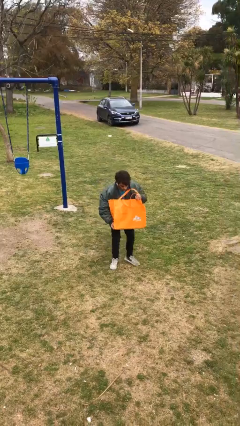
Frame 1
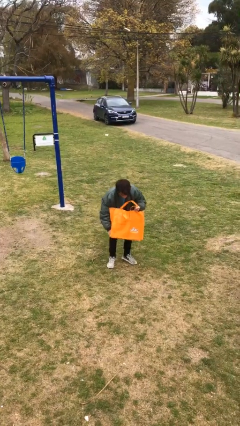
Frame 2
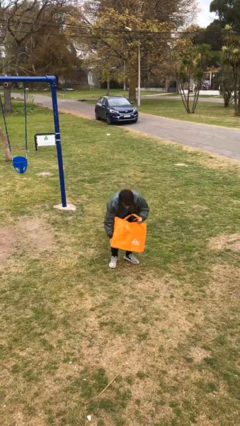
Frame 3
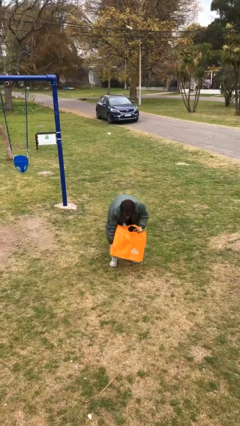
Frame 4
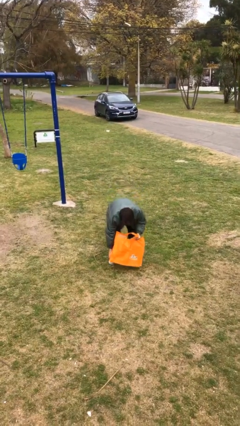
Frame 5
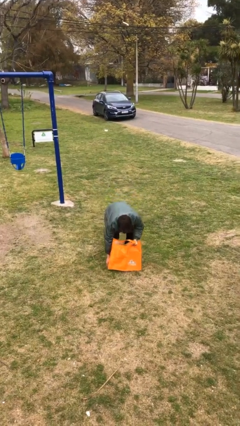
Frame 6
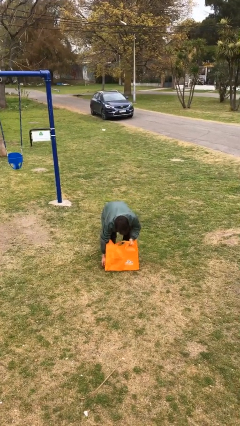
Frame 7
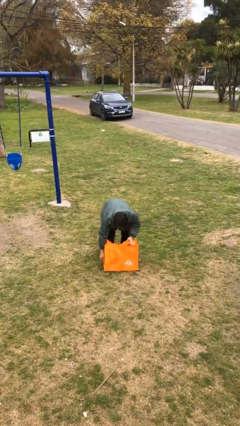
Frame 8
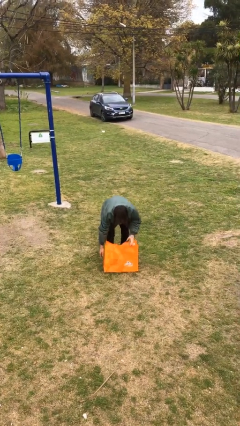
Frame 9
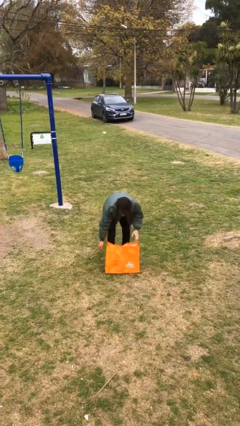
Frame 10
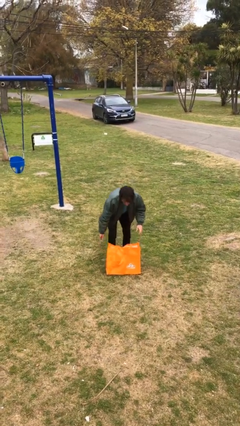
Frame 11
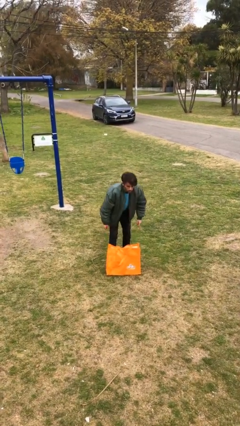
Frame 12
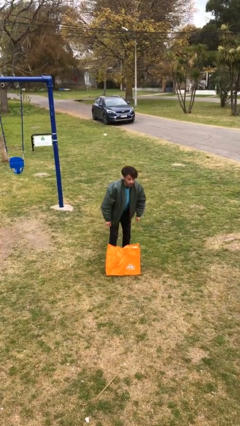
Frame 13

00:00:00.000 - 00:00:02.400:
person puts down object on floor

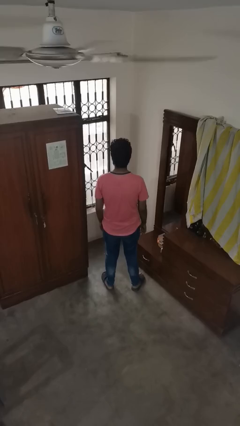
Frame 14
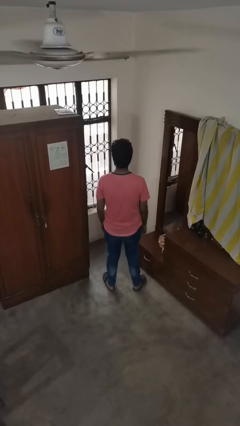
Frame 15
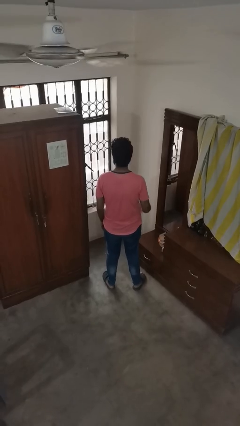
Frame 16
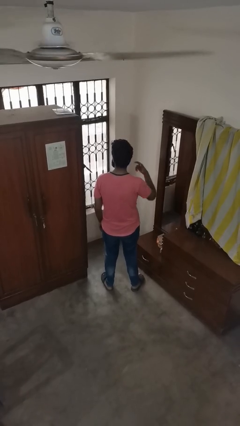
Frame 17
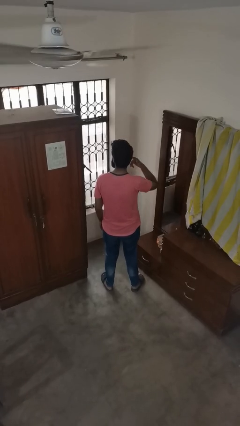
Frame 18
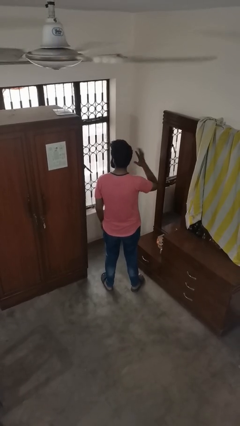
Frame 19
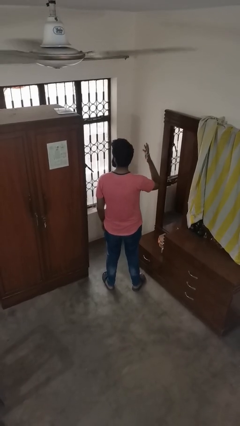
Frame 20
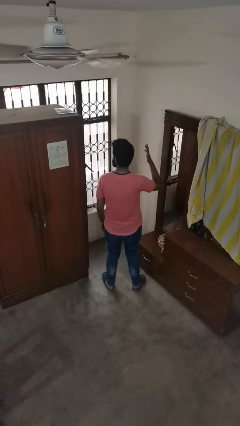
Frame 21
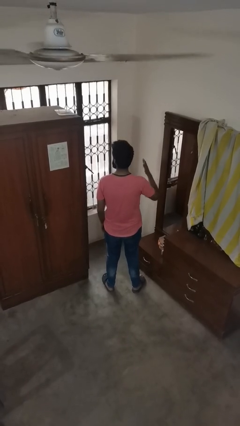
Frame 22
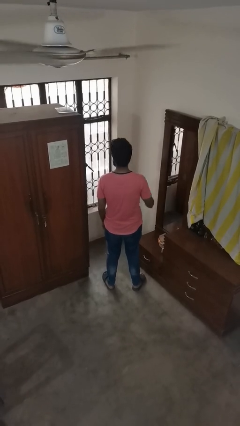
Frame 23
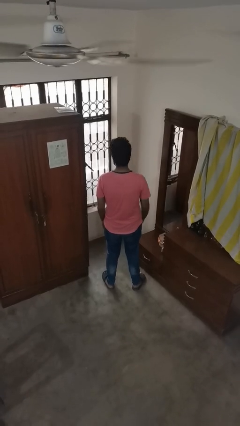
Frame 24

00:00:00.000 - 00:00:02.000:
person puts fingers in ear

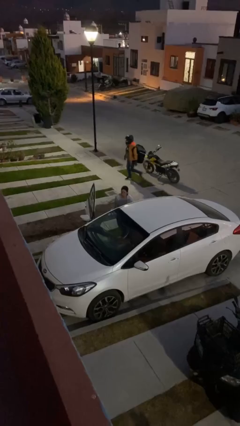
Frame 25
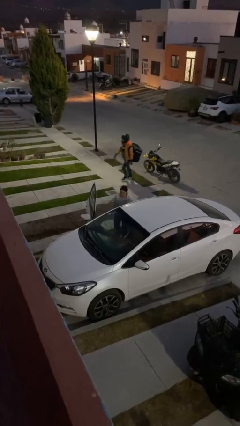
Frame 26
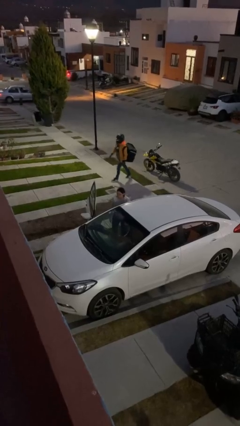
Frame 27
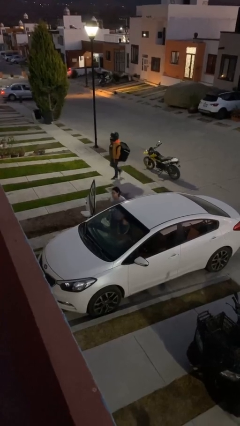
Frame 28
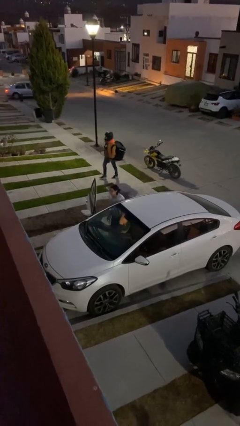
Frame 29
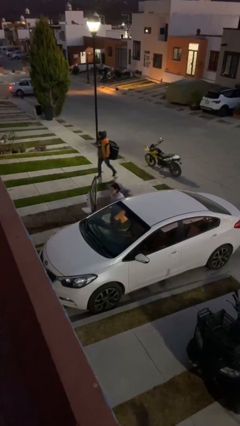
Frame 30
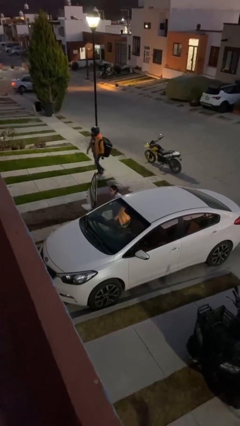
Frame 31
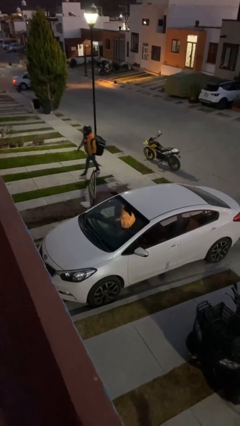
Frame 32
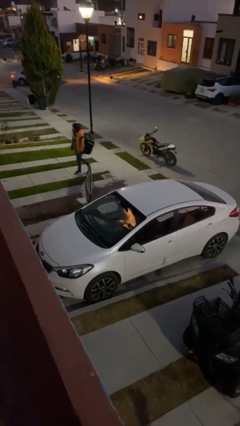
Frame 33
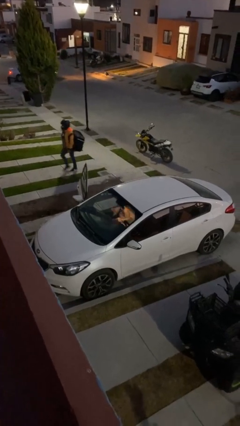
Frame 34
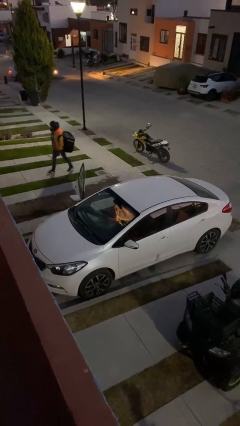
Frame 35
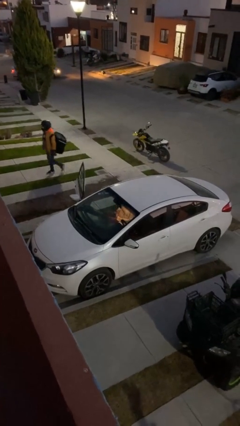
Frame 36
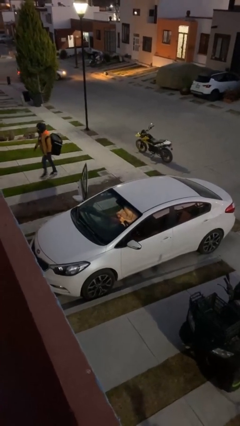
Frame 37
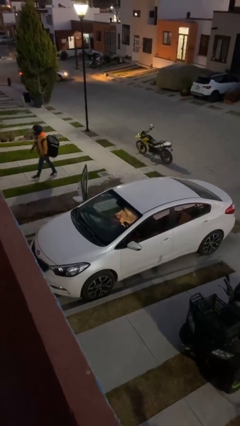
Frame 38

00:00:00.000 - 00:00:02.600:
person enters car

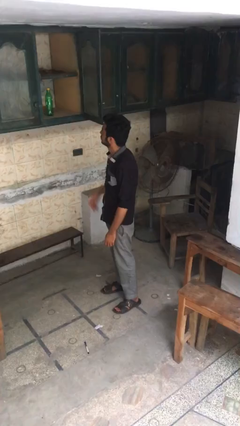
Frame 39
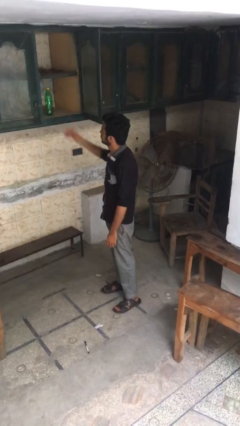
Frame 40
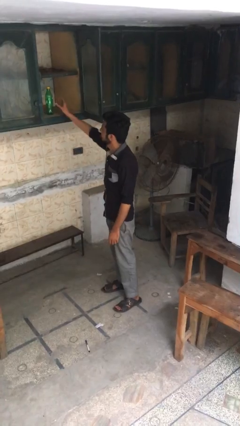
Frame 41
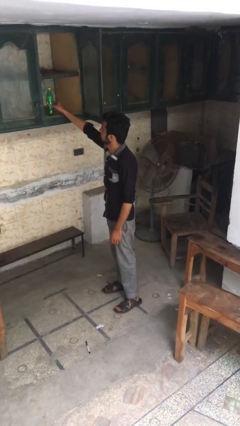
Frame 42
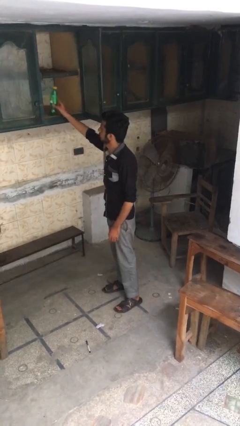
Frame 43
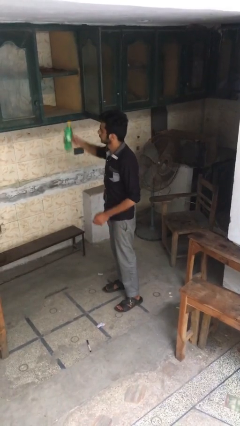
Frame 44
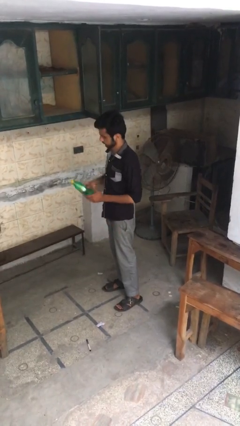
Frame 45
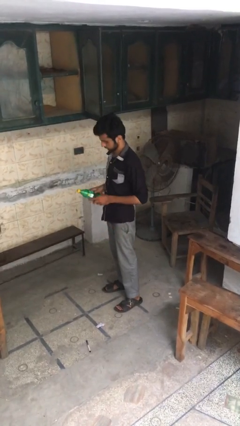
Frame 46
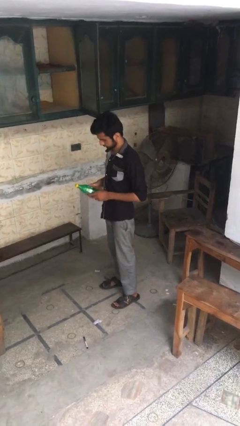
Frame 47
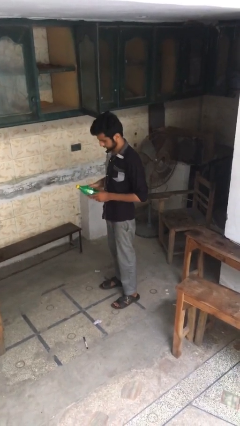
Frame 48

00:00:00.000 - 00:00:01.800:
person takes object from cabinet

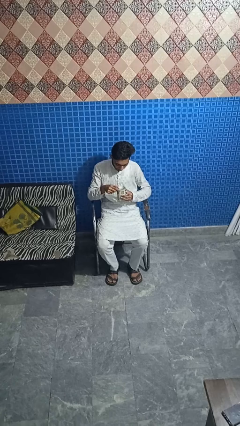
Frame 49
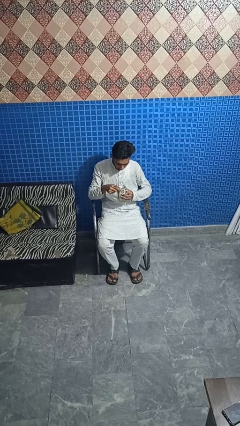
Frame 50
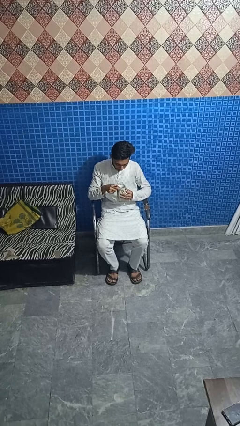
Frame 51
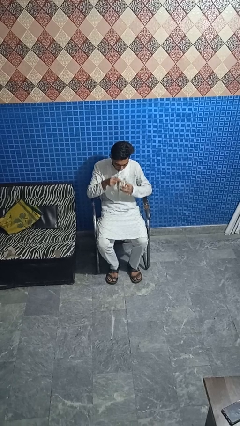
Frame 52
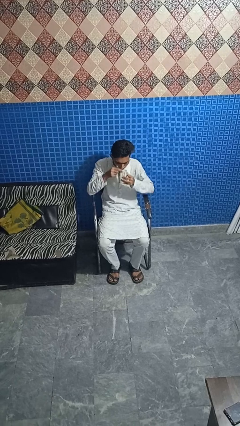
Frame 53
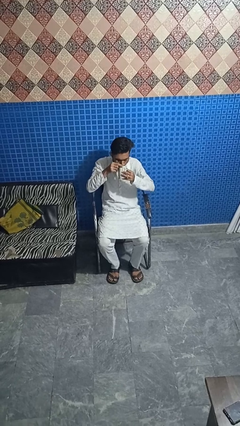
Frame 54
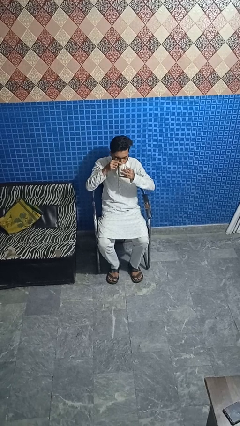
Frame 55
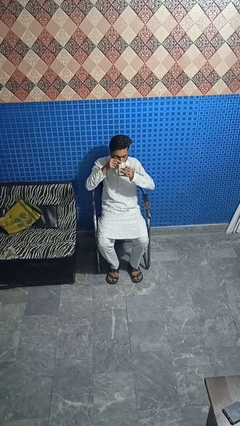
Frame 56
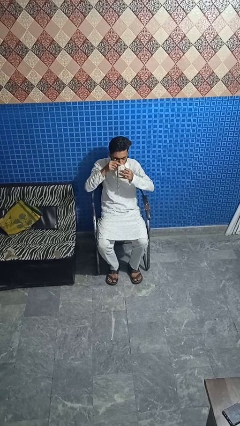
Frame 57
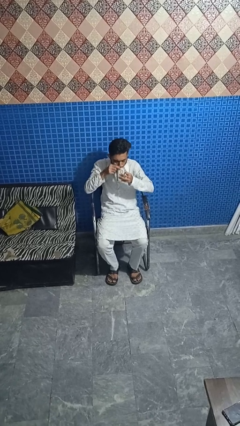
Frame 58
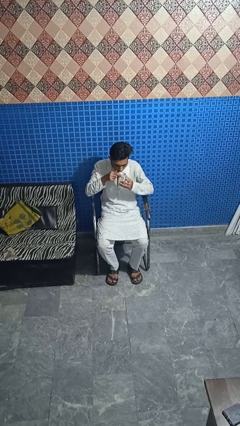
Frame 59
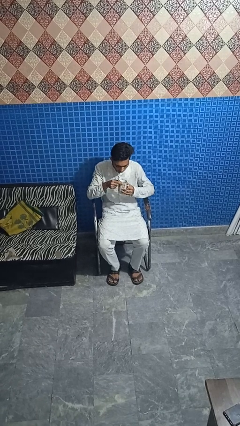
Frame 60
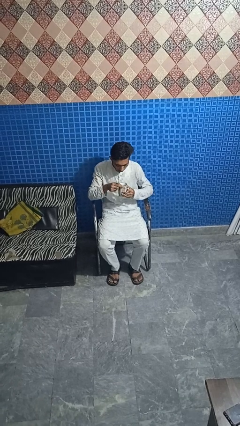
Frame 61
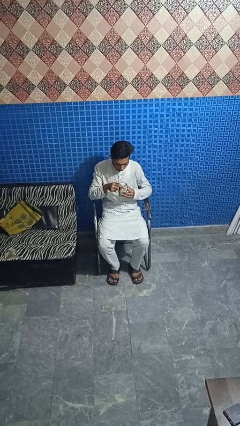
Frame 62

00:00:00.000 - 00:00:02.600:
person drinks from mug

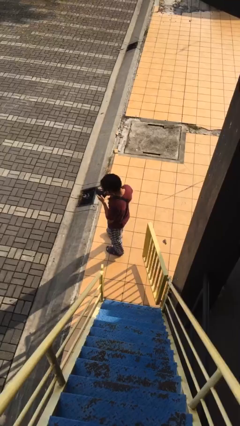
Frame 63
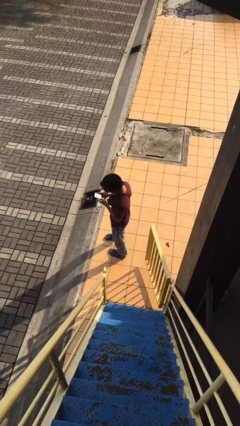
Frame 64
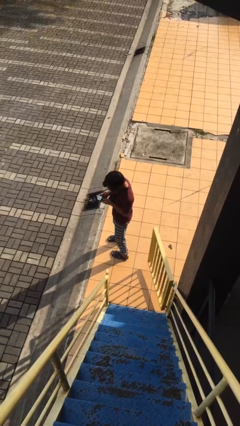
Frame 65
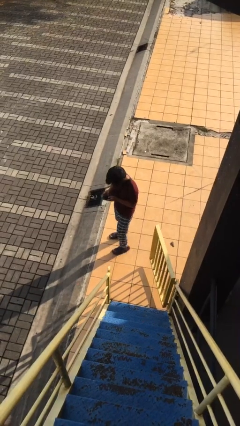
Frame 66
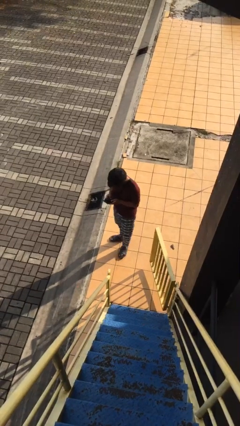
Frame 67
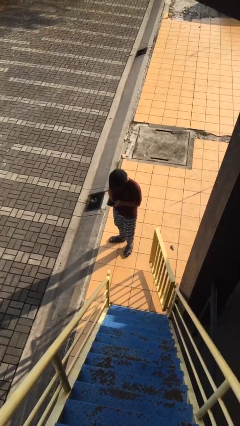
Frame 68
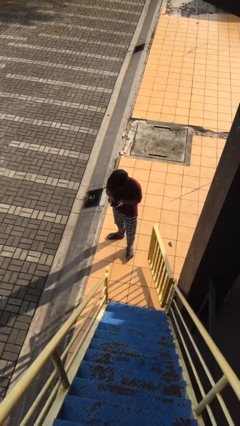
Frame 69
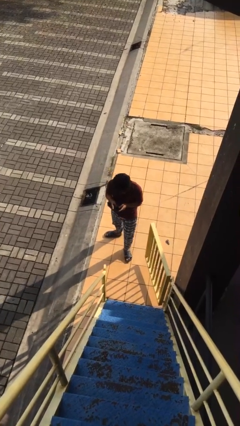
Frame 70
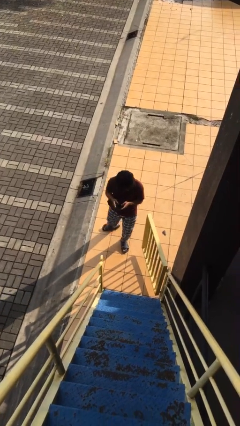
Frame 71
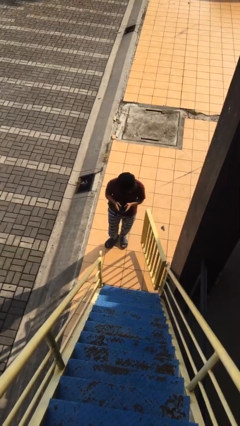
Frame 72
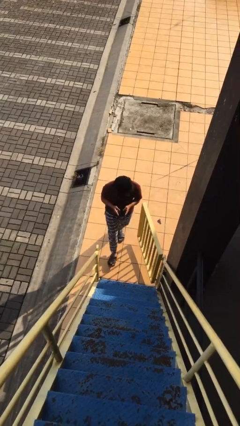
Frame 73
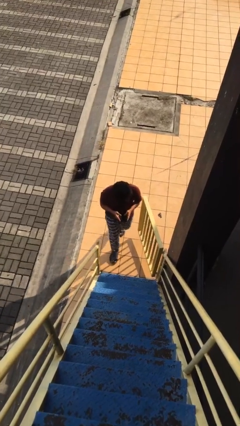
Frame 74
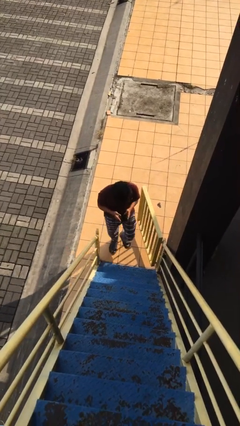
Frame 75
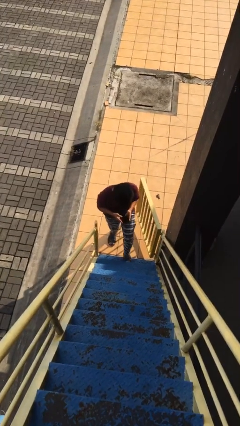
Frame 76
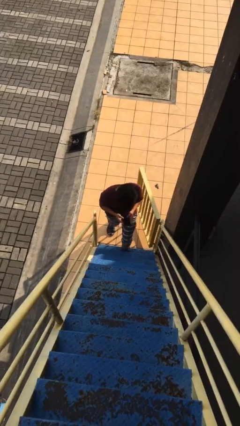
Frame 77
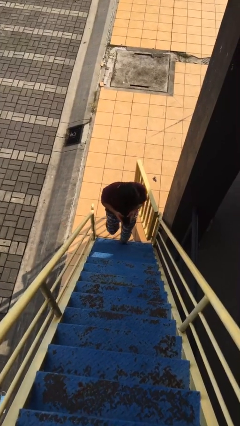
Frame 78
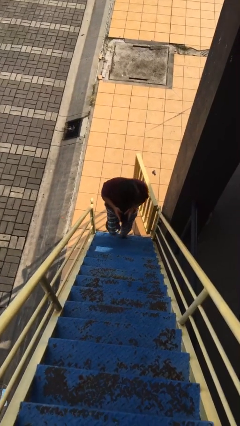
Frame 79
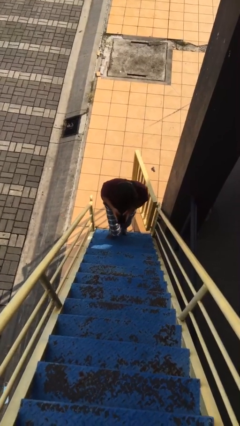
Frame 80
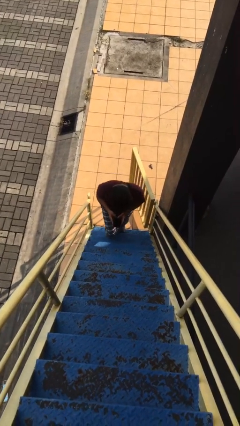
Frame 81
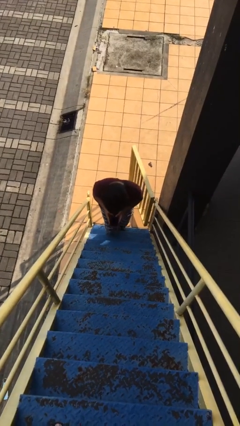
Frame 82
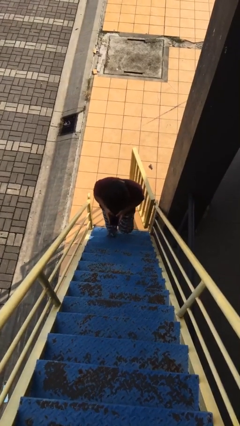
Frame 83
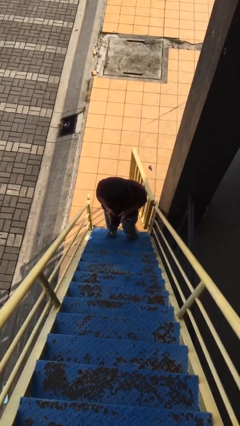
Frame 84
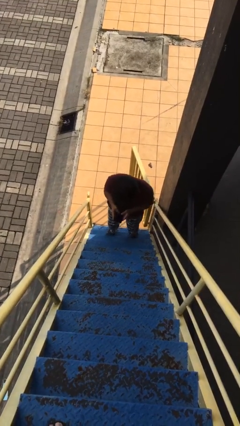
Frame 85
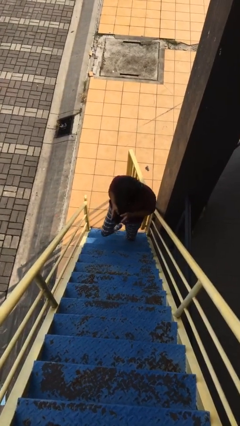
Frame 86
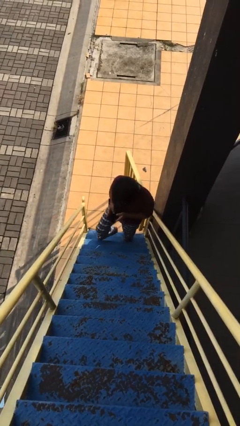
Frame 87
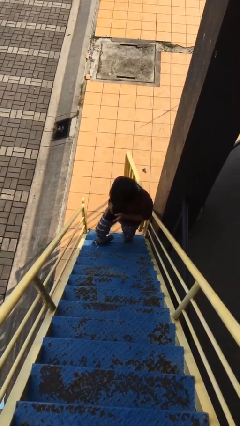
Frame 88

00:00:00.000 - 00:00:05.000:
person enters scene through structure

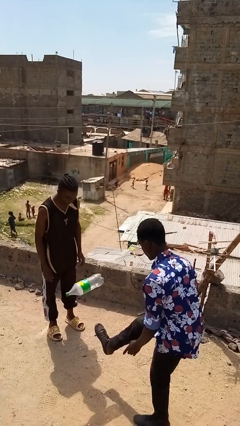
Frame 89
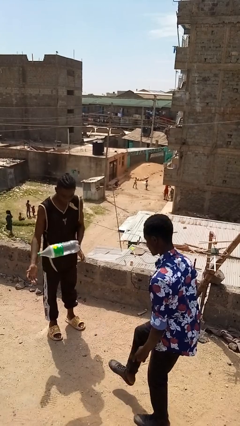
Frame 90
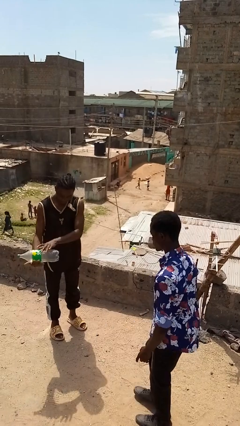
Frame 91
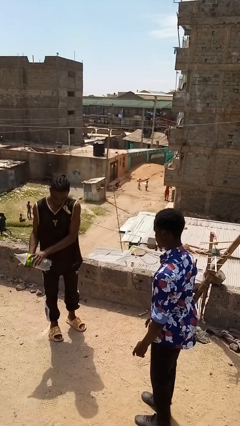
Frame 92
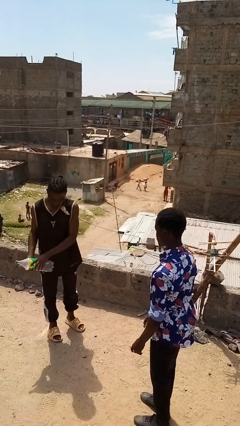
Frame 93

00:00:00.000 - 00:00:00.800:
person kicks object to person
